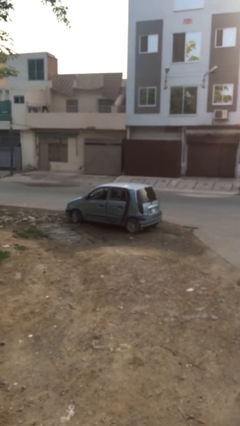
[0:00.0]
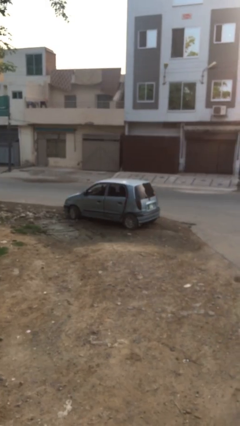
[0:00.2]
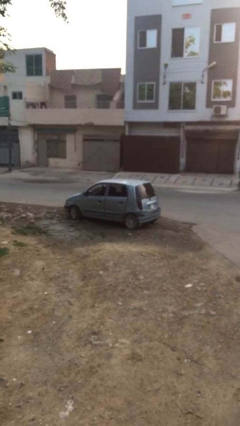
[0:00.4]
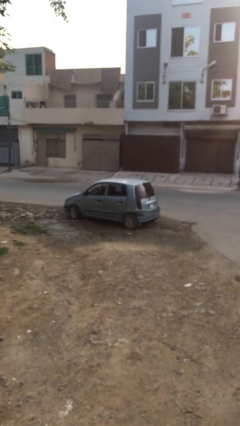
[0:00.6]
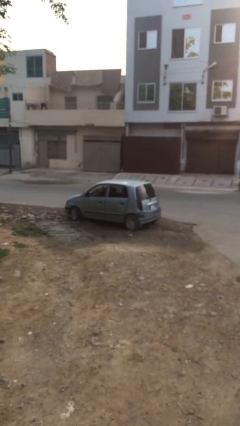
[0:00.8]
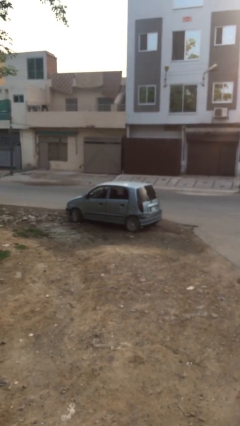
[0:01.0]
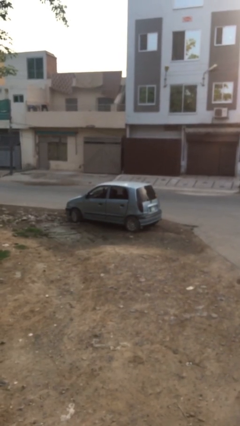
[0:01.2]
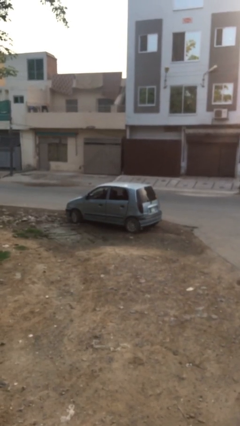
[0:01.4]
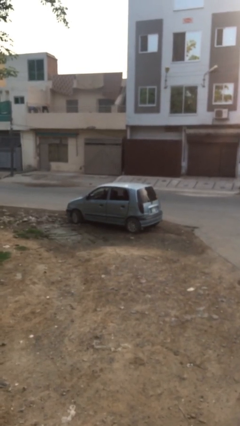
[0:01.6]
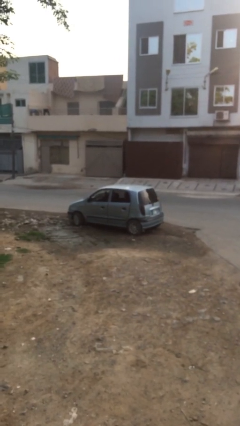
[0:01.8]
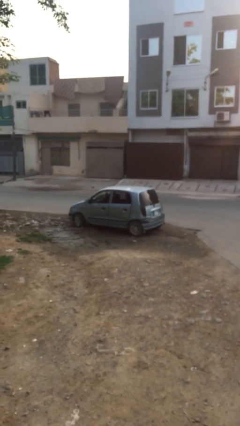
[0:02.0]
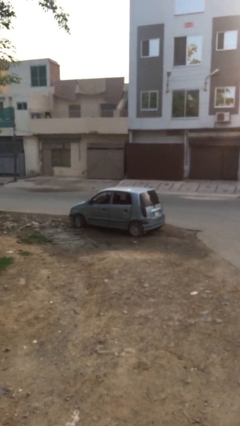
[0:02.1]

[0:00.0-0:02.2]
person closes car door

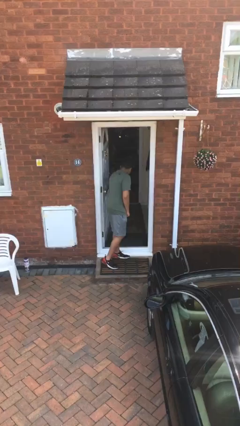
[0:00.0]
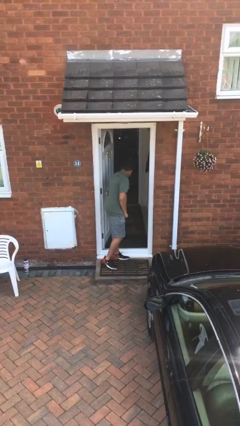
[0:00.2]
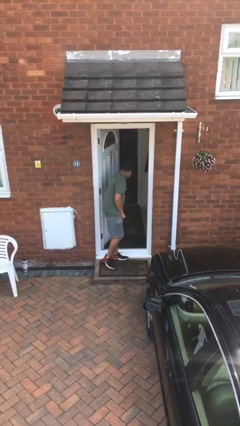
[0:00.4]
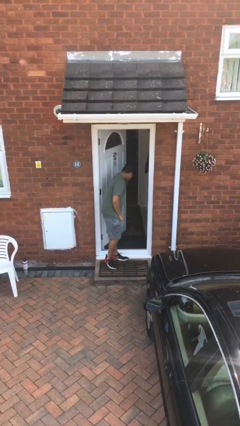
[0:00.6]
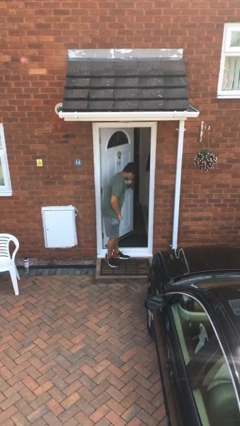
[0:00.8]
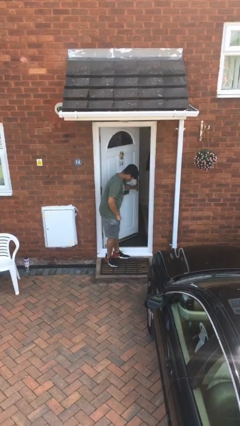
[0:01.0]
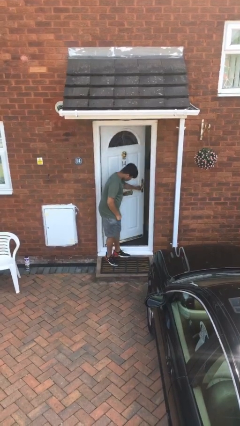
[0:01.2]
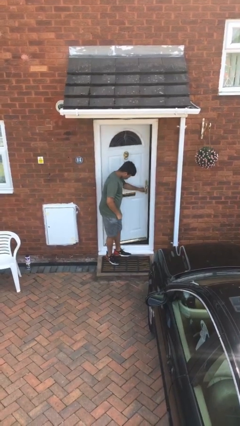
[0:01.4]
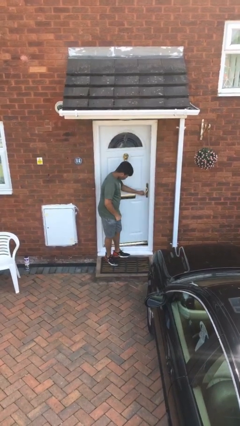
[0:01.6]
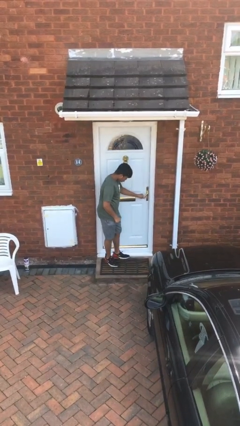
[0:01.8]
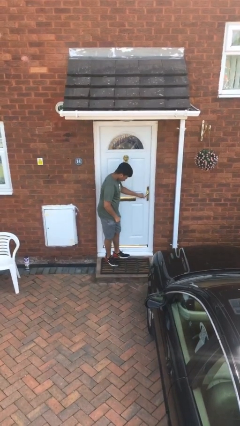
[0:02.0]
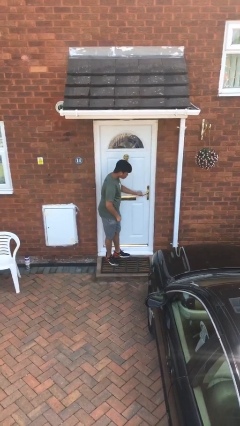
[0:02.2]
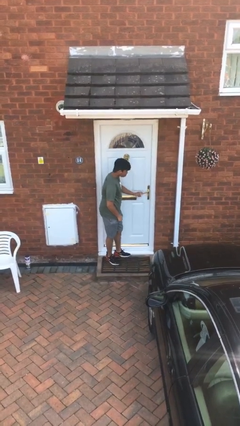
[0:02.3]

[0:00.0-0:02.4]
person closes facility door

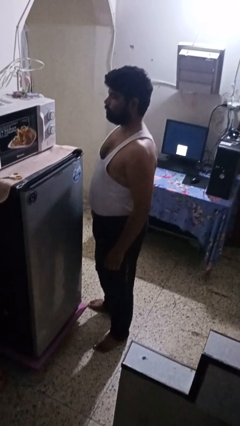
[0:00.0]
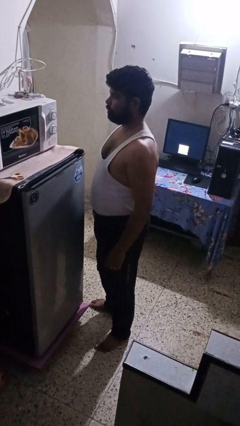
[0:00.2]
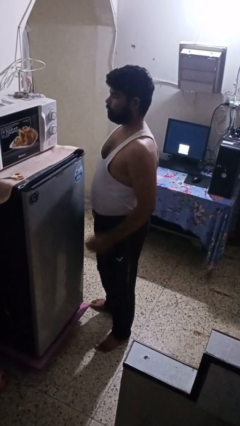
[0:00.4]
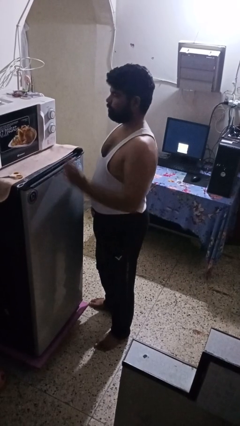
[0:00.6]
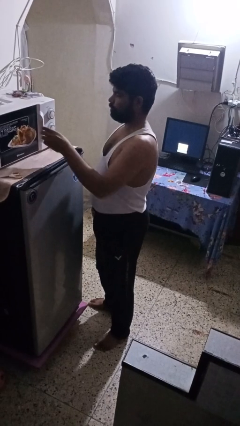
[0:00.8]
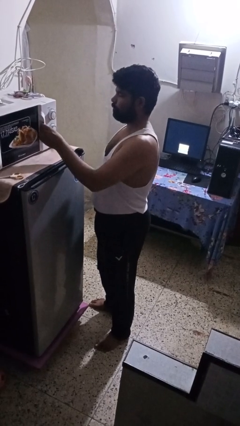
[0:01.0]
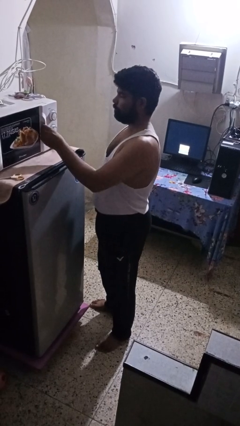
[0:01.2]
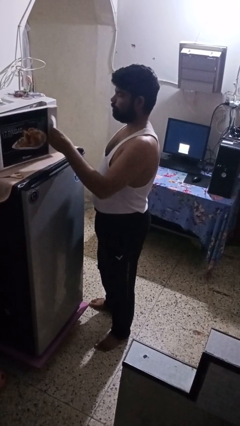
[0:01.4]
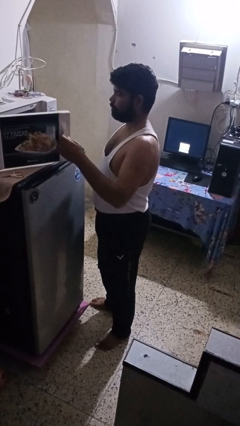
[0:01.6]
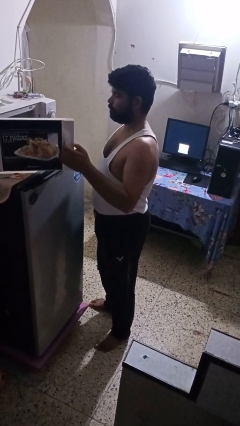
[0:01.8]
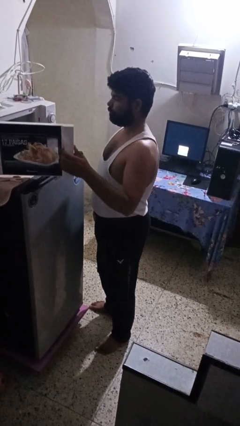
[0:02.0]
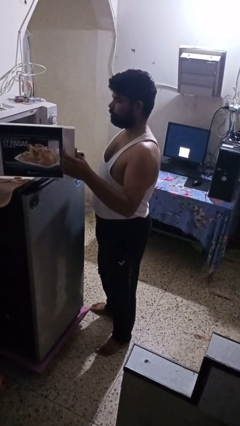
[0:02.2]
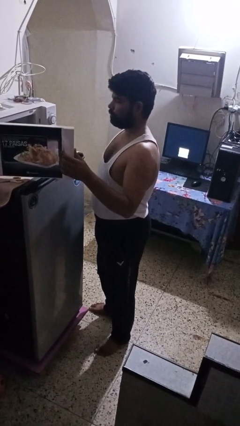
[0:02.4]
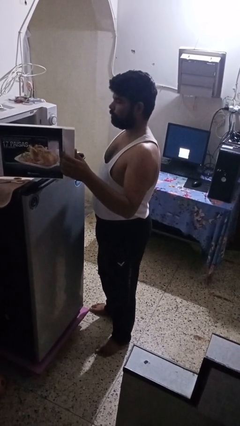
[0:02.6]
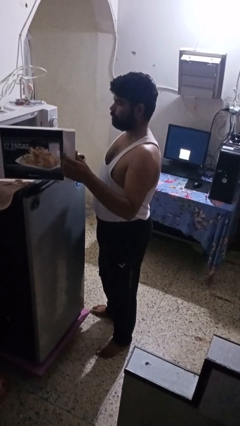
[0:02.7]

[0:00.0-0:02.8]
person opens microwave

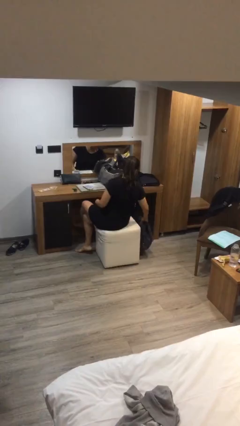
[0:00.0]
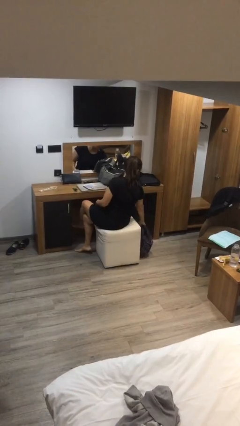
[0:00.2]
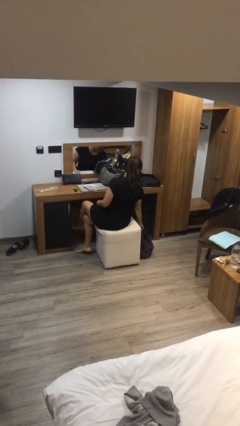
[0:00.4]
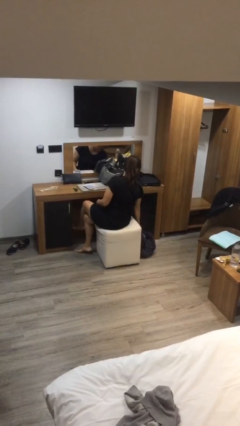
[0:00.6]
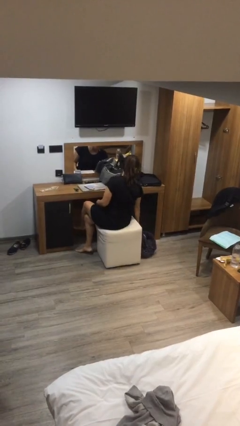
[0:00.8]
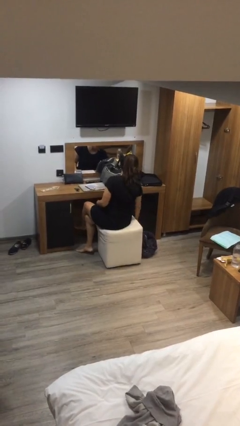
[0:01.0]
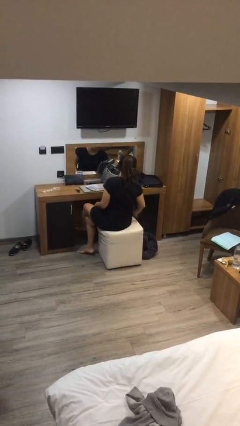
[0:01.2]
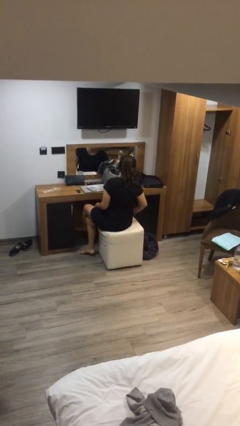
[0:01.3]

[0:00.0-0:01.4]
person puts down object on floor

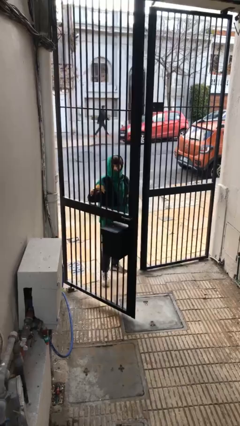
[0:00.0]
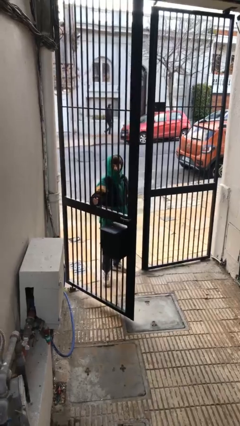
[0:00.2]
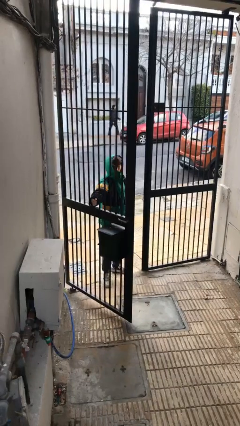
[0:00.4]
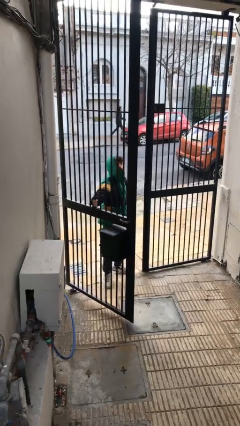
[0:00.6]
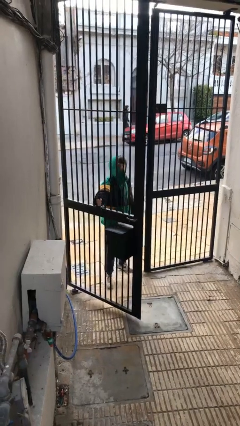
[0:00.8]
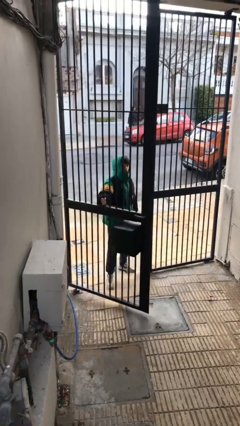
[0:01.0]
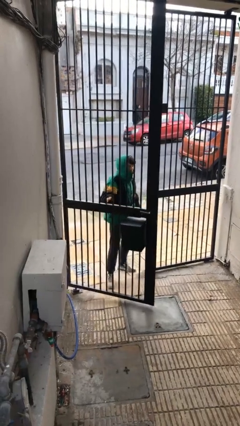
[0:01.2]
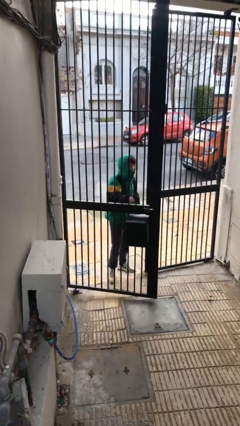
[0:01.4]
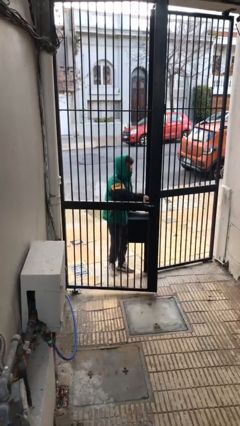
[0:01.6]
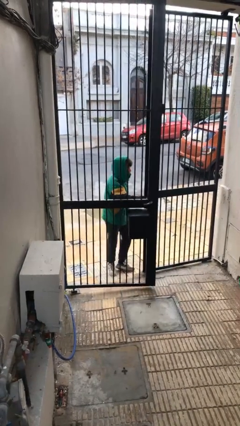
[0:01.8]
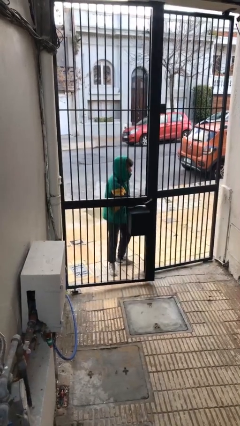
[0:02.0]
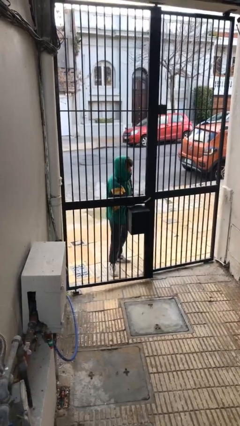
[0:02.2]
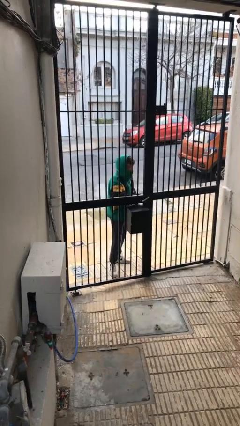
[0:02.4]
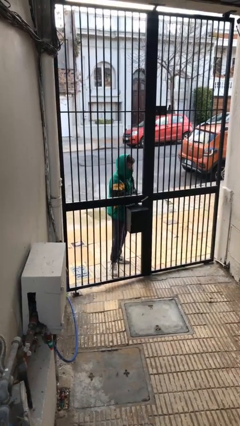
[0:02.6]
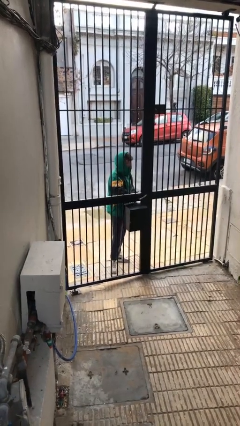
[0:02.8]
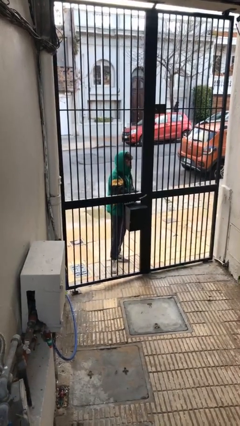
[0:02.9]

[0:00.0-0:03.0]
person closes gate

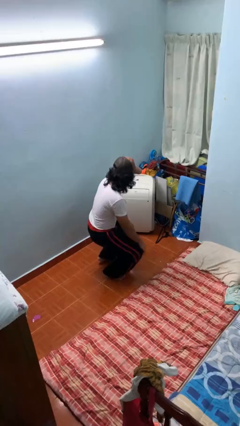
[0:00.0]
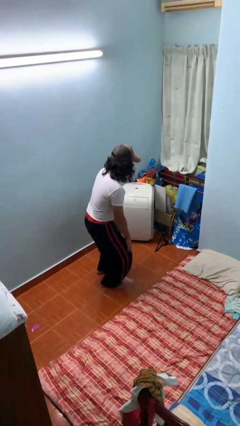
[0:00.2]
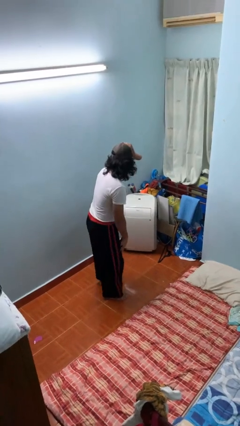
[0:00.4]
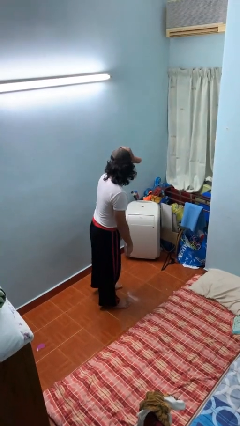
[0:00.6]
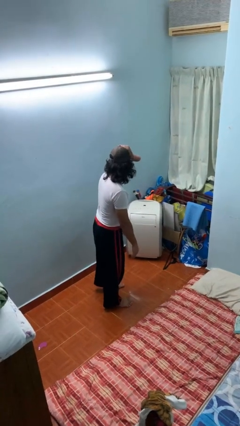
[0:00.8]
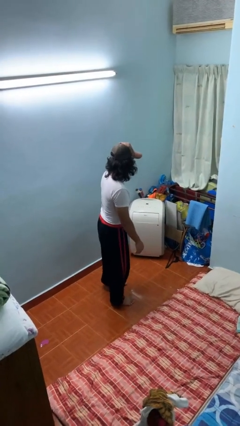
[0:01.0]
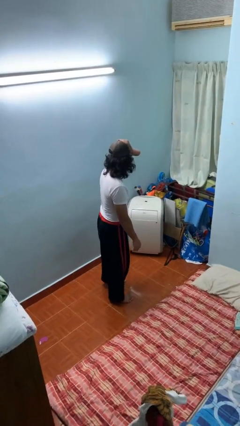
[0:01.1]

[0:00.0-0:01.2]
person stands up

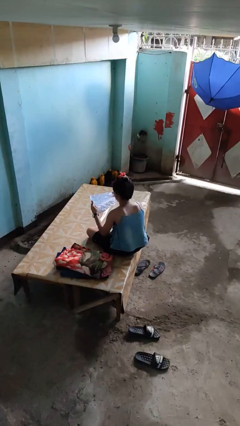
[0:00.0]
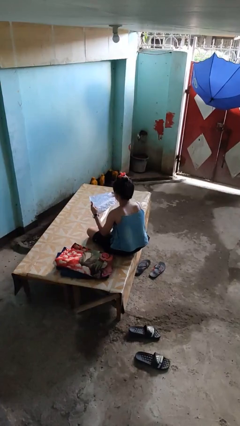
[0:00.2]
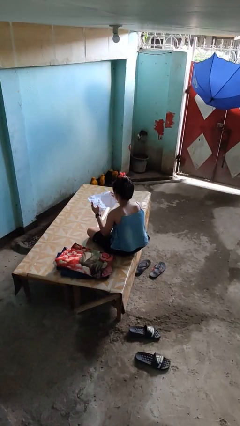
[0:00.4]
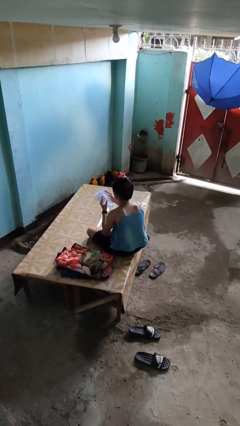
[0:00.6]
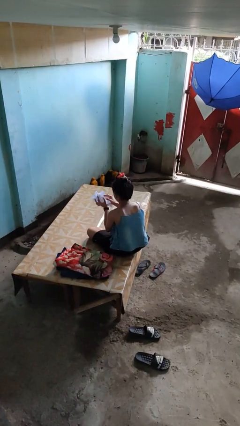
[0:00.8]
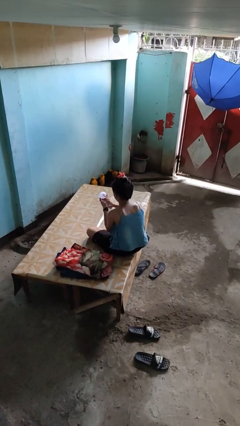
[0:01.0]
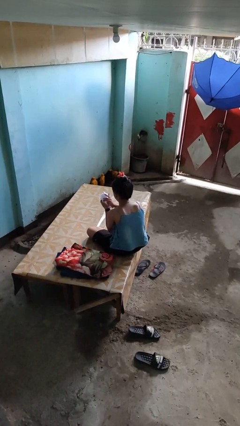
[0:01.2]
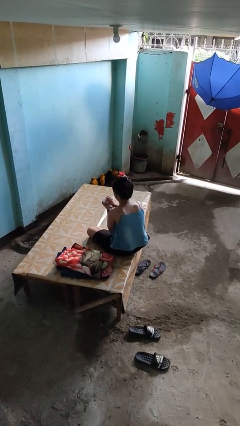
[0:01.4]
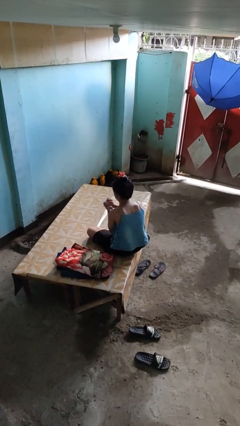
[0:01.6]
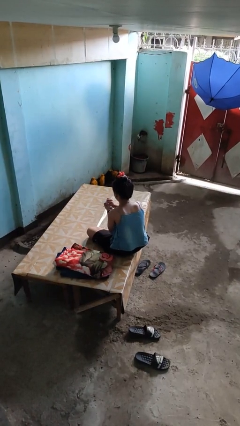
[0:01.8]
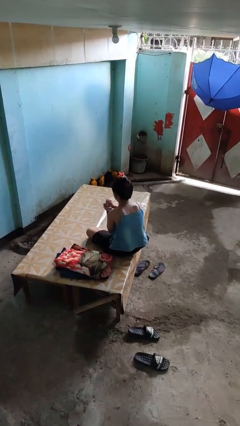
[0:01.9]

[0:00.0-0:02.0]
person crumples paper

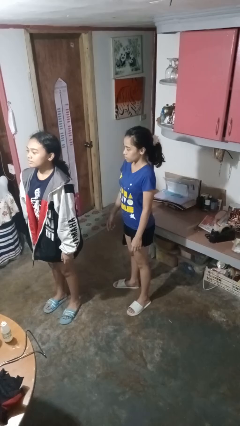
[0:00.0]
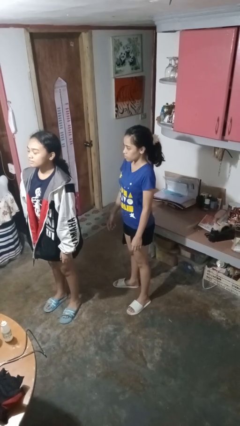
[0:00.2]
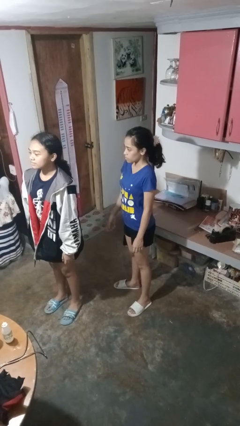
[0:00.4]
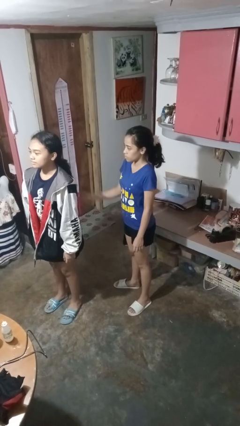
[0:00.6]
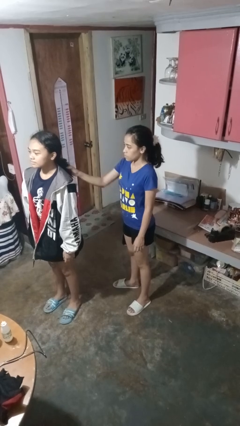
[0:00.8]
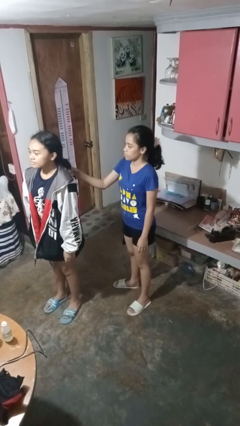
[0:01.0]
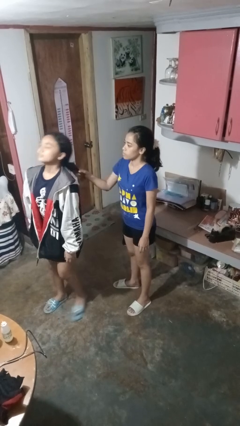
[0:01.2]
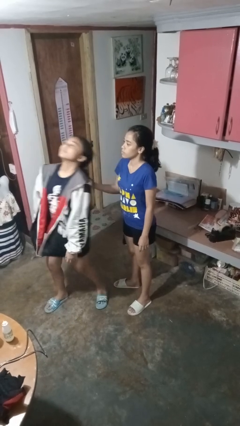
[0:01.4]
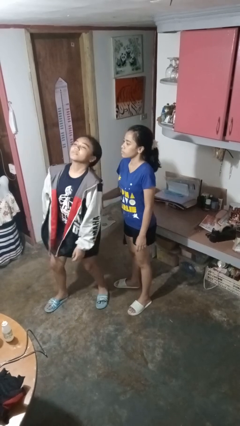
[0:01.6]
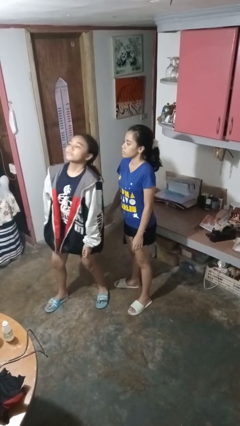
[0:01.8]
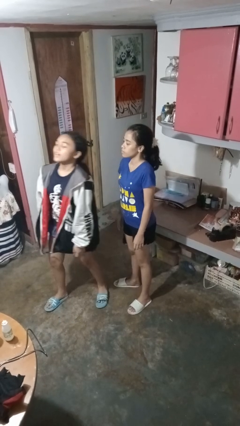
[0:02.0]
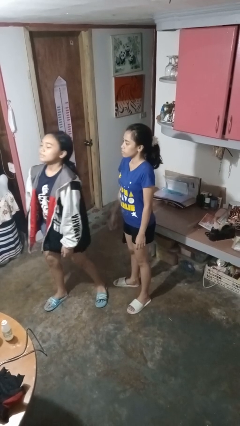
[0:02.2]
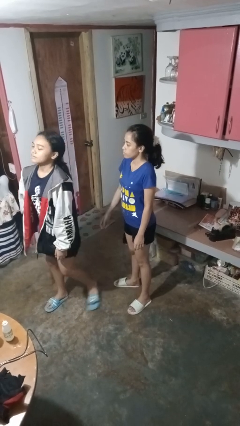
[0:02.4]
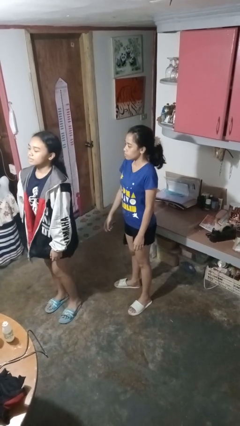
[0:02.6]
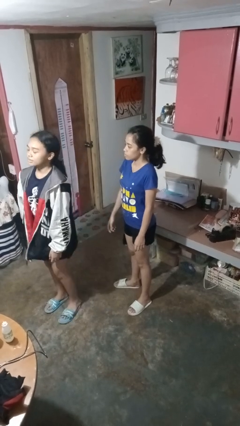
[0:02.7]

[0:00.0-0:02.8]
person grabs person by hair
